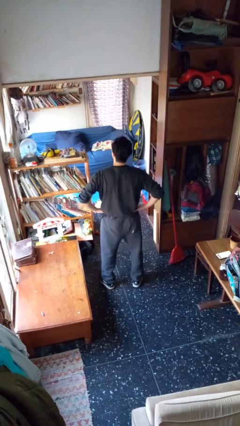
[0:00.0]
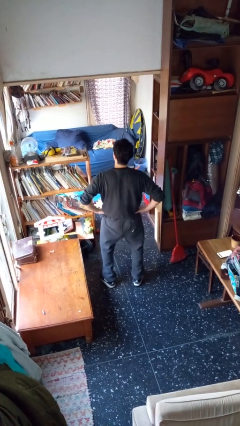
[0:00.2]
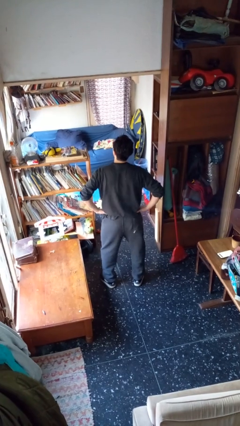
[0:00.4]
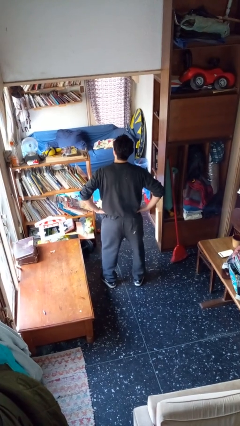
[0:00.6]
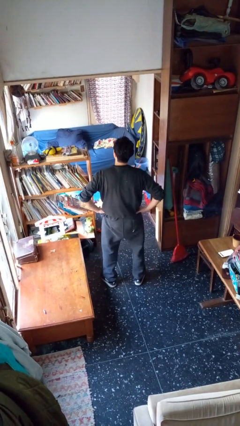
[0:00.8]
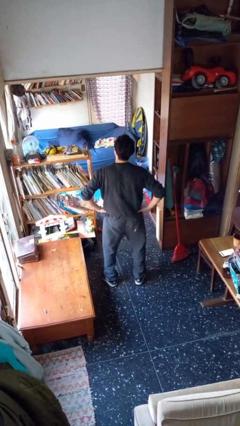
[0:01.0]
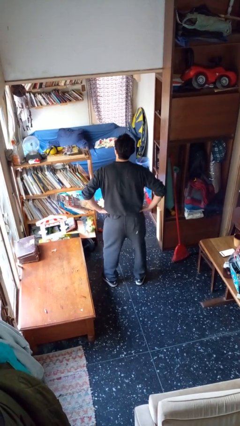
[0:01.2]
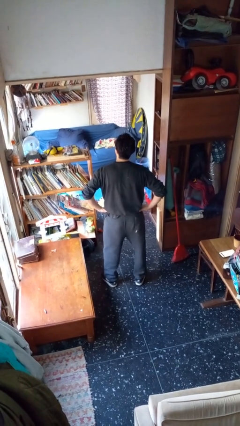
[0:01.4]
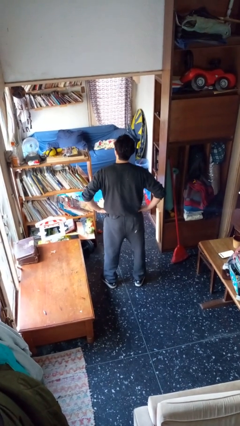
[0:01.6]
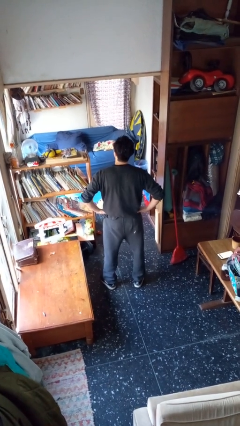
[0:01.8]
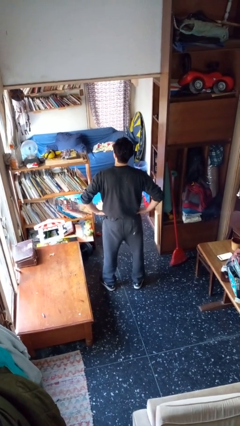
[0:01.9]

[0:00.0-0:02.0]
person wiggles hips

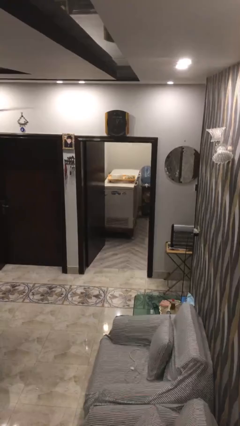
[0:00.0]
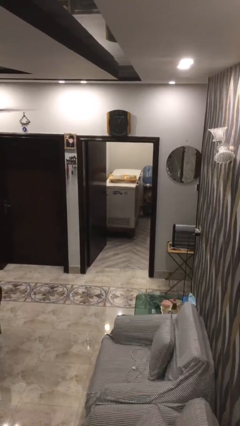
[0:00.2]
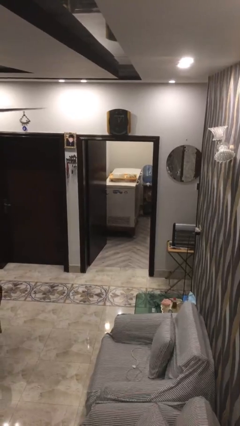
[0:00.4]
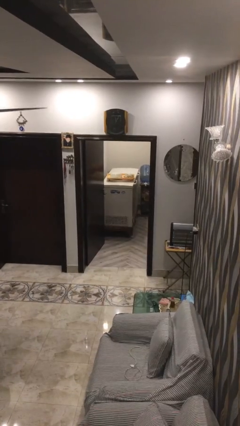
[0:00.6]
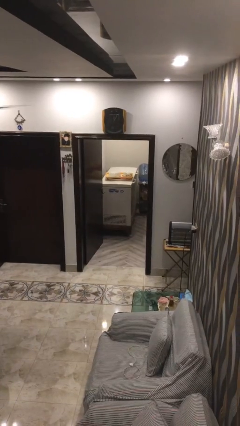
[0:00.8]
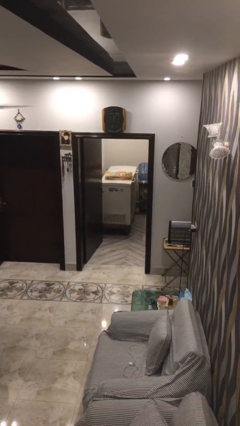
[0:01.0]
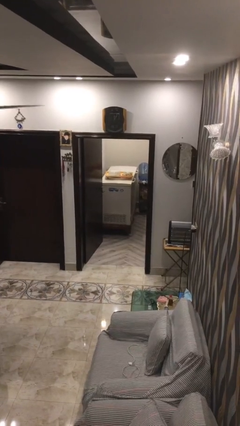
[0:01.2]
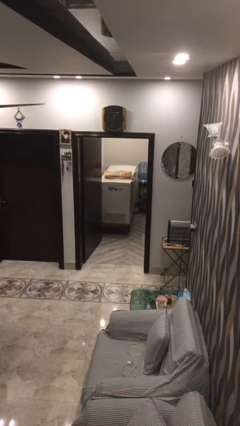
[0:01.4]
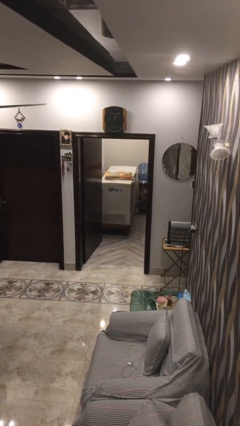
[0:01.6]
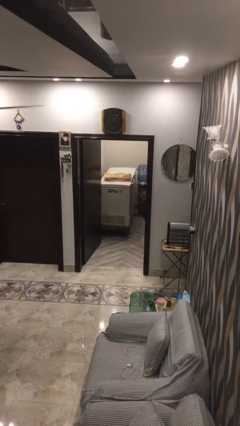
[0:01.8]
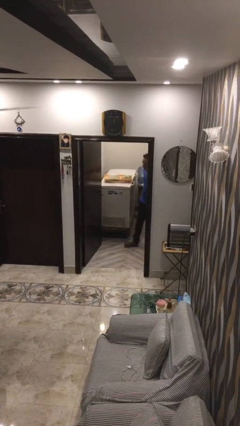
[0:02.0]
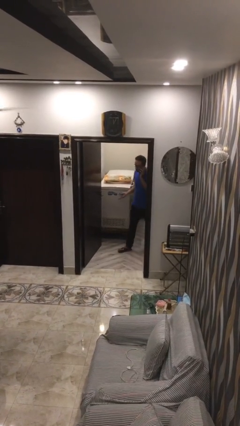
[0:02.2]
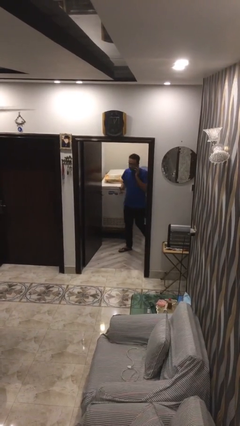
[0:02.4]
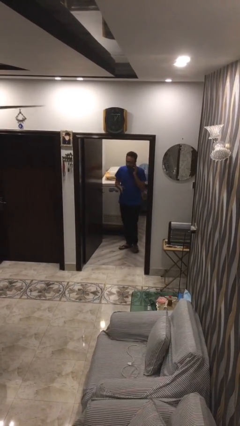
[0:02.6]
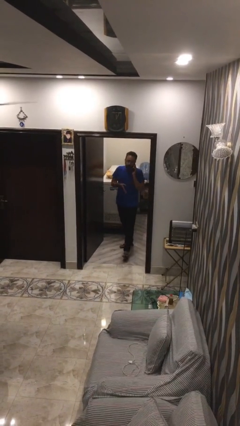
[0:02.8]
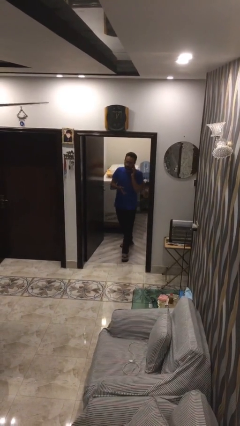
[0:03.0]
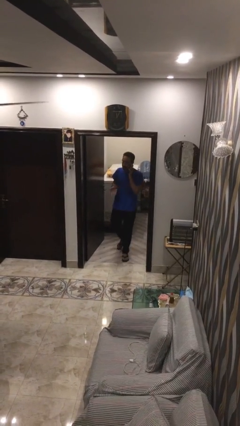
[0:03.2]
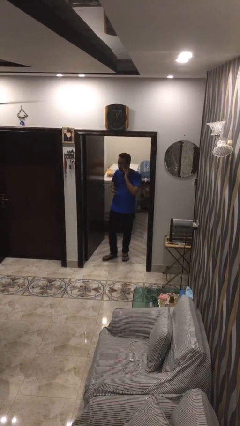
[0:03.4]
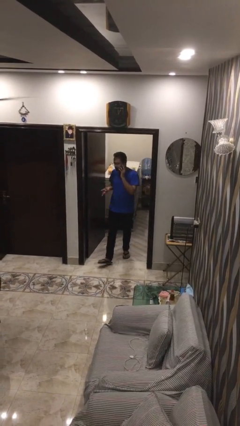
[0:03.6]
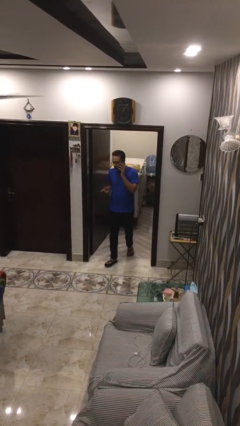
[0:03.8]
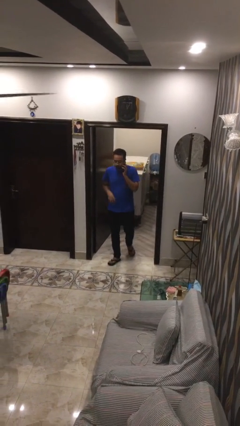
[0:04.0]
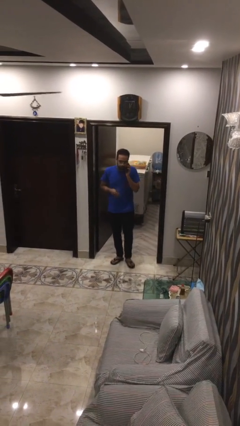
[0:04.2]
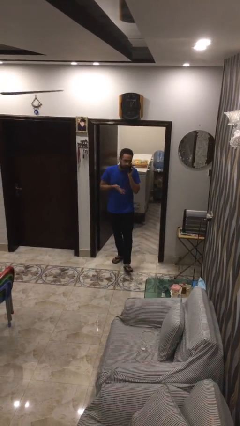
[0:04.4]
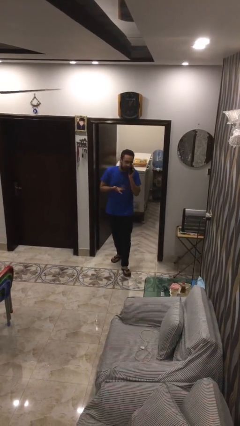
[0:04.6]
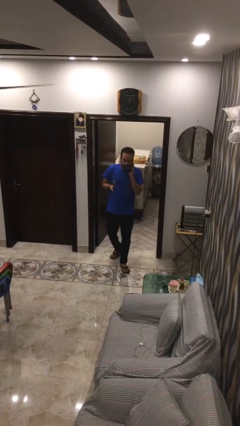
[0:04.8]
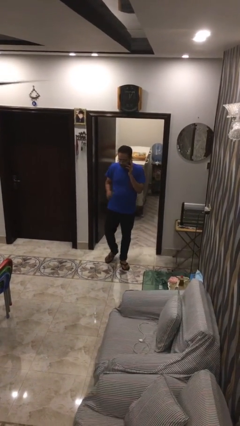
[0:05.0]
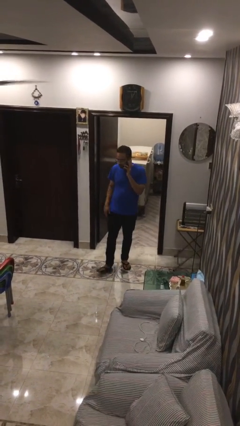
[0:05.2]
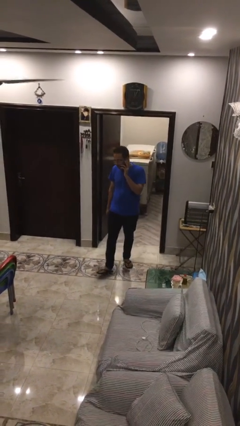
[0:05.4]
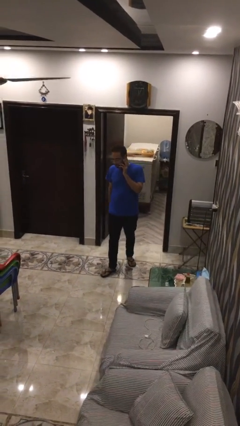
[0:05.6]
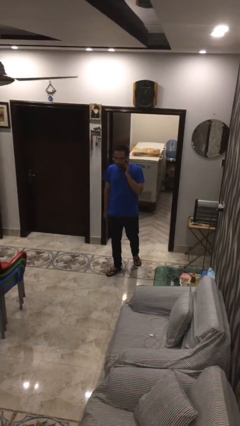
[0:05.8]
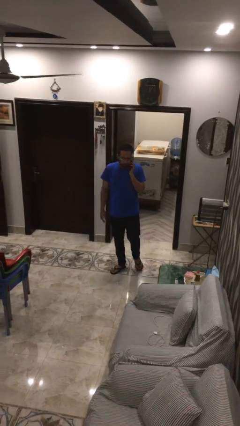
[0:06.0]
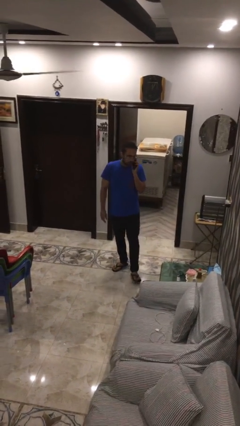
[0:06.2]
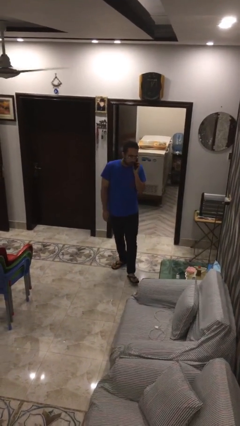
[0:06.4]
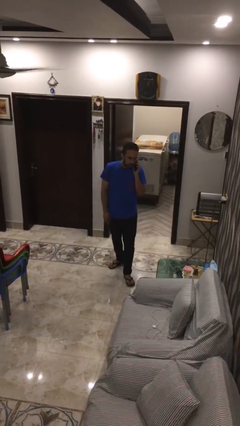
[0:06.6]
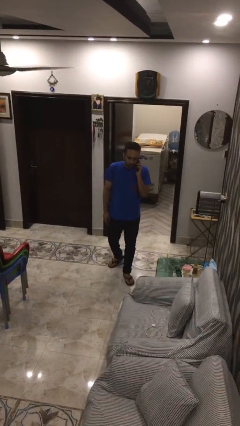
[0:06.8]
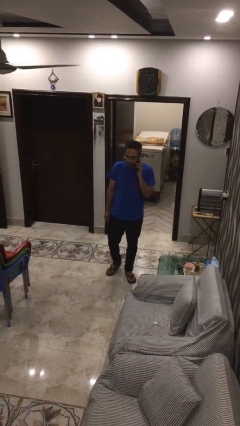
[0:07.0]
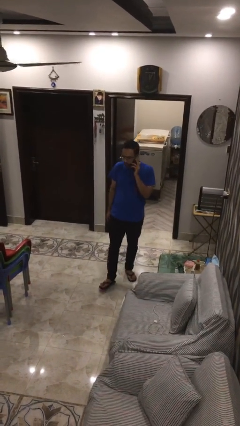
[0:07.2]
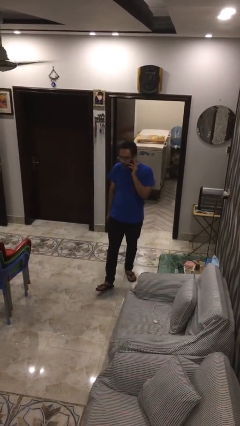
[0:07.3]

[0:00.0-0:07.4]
person enters scene through structure

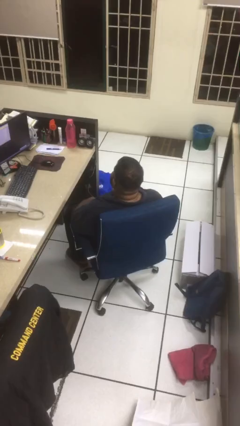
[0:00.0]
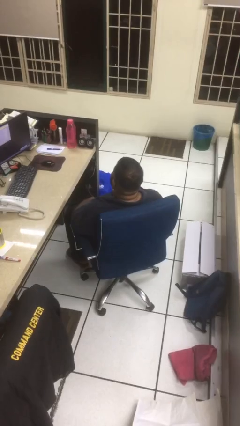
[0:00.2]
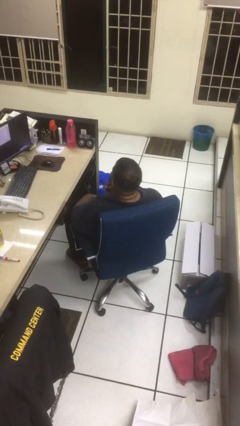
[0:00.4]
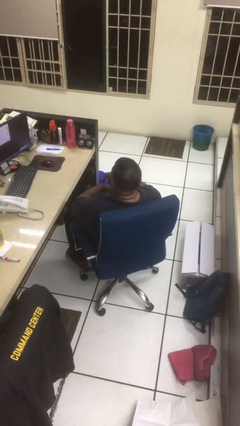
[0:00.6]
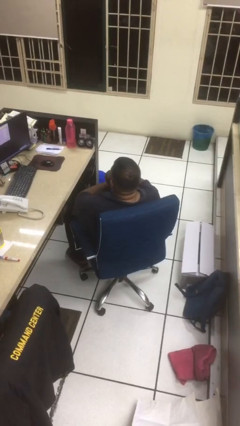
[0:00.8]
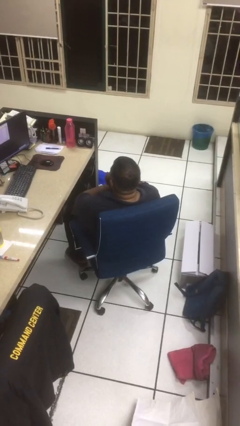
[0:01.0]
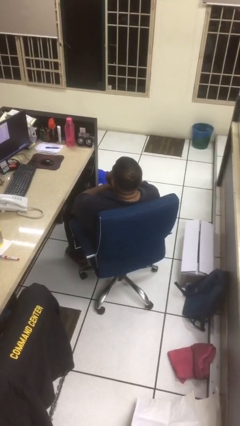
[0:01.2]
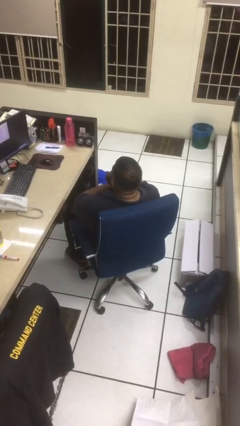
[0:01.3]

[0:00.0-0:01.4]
person strokes chin

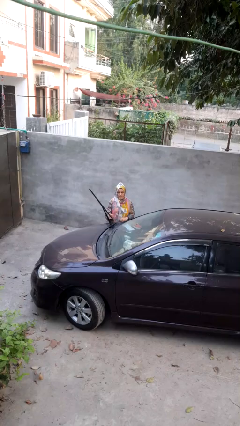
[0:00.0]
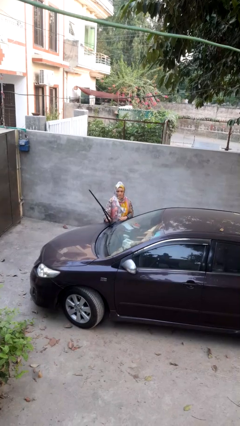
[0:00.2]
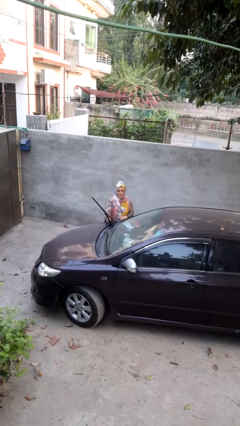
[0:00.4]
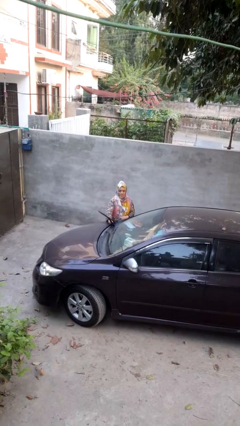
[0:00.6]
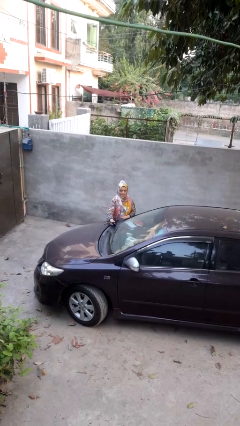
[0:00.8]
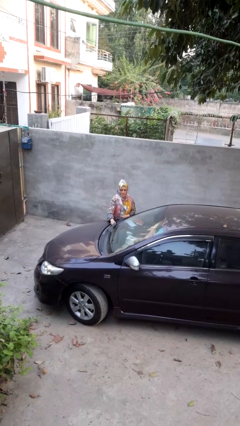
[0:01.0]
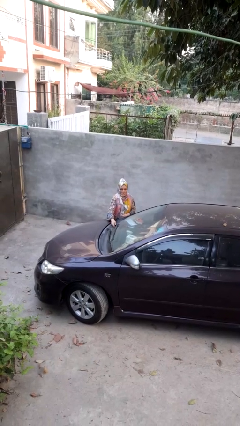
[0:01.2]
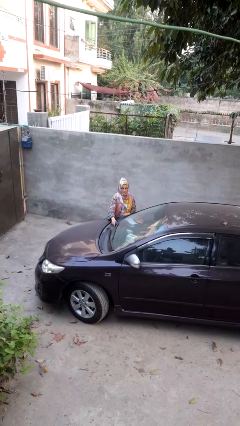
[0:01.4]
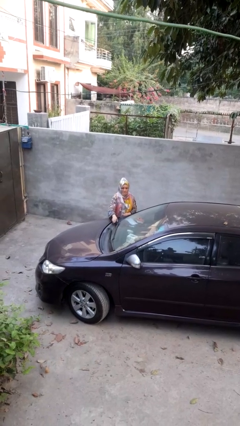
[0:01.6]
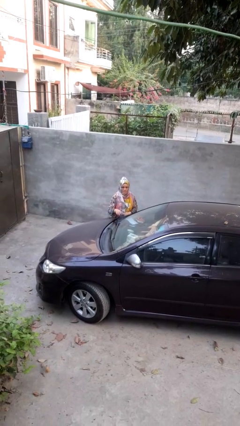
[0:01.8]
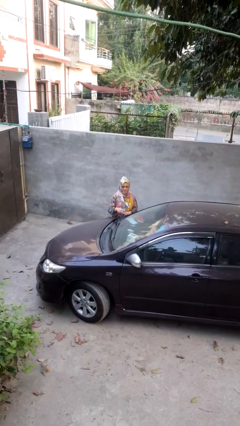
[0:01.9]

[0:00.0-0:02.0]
person flips down car wipers

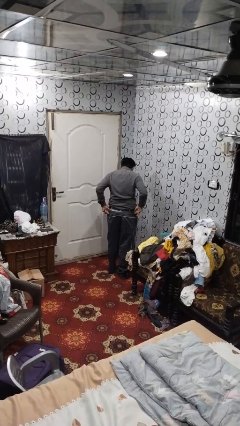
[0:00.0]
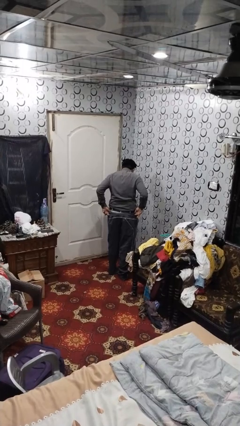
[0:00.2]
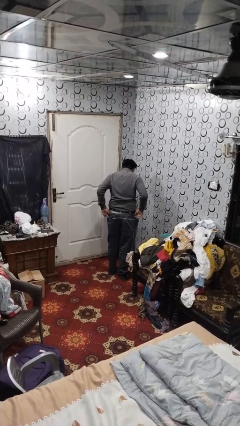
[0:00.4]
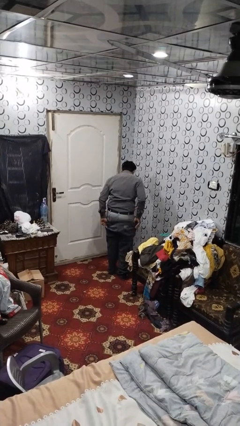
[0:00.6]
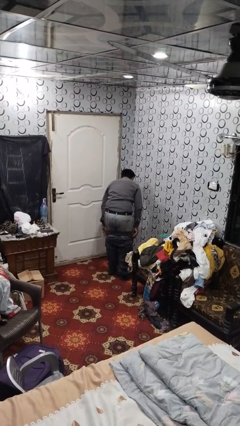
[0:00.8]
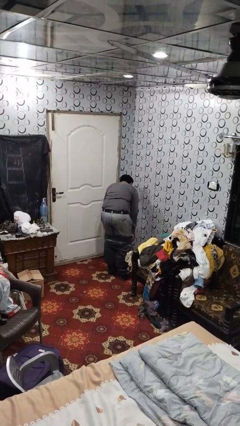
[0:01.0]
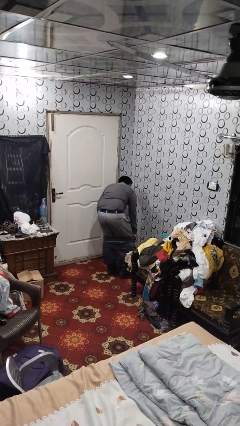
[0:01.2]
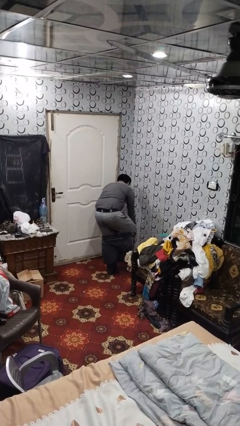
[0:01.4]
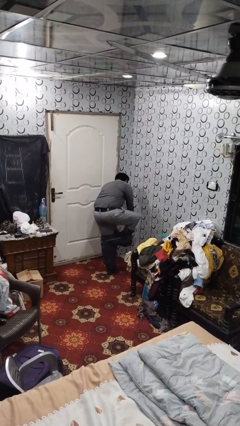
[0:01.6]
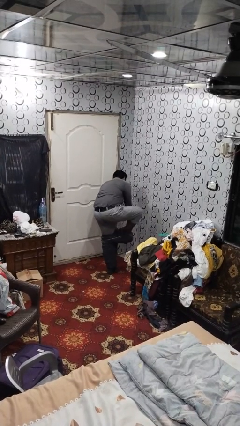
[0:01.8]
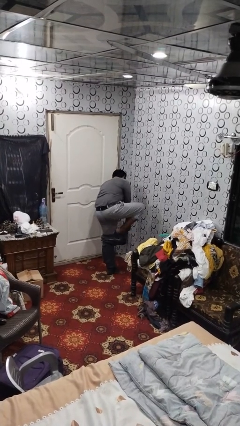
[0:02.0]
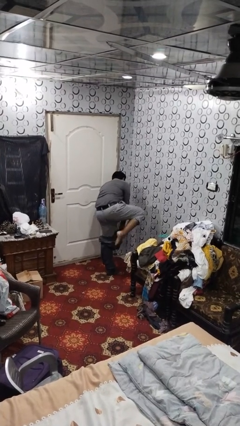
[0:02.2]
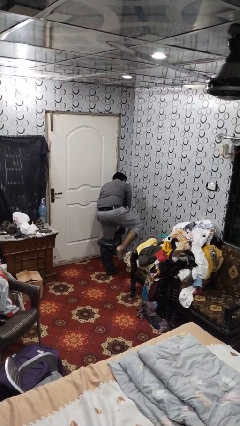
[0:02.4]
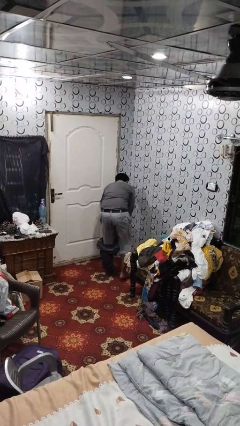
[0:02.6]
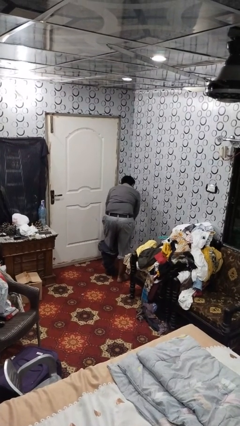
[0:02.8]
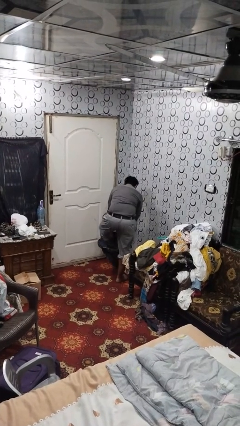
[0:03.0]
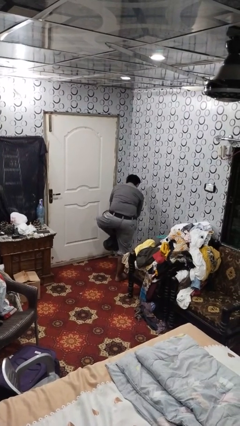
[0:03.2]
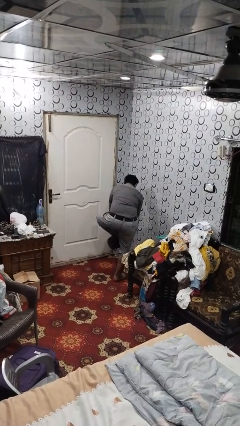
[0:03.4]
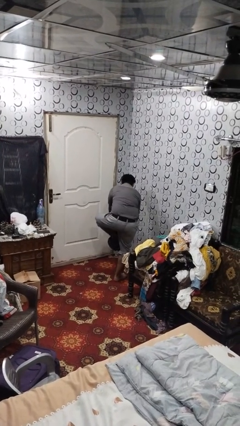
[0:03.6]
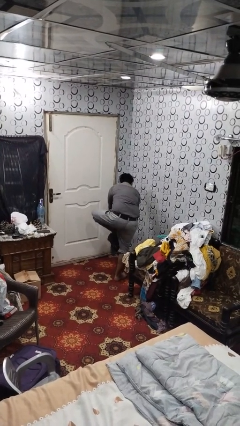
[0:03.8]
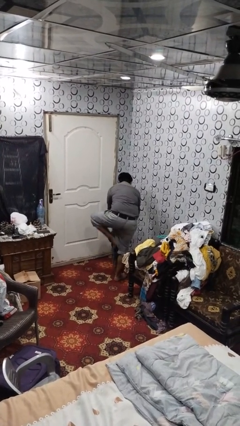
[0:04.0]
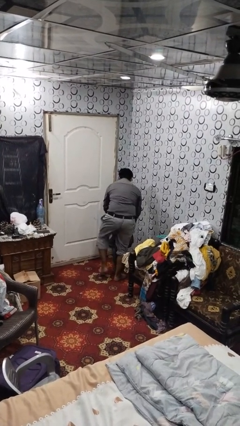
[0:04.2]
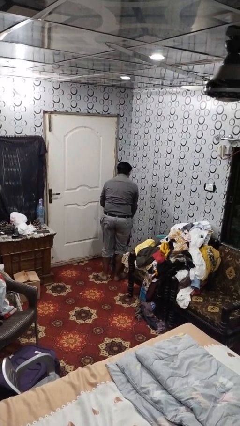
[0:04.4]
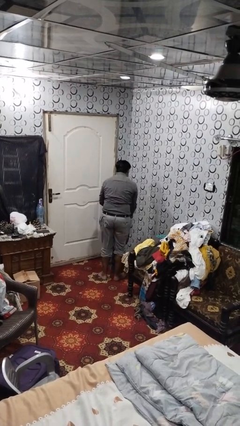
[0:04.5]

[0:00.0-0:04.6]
person takes off pants
